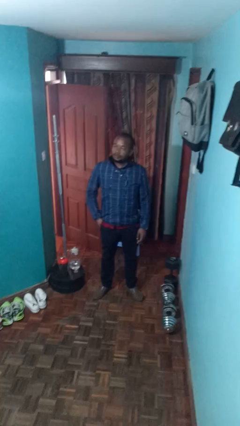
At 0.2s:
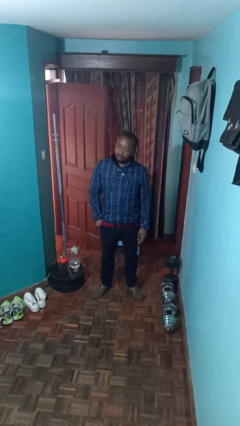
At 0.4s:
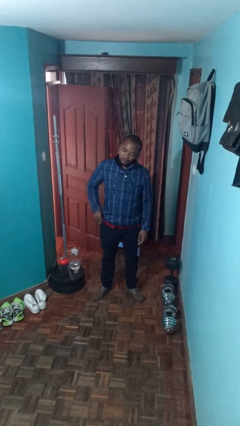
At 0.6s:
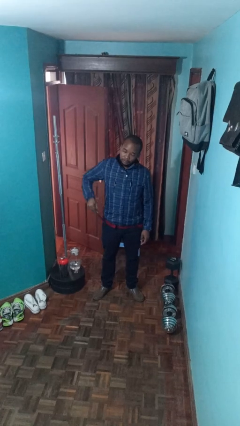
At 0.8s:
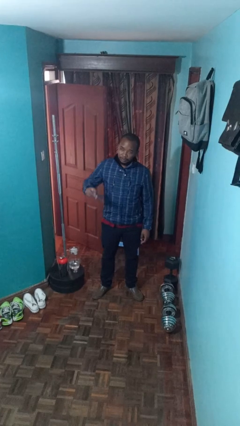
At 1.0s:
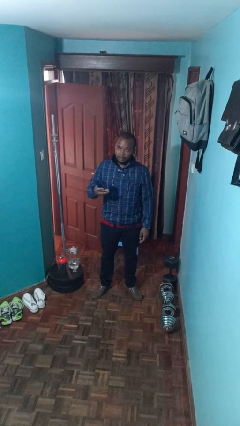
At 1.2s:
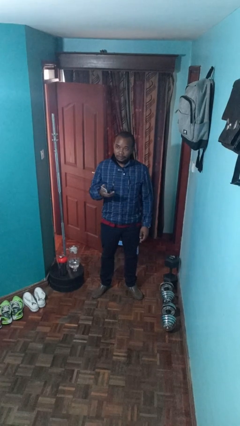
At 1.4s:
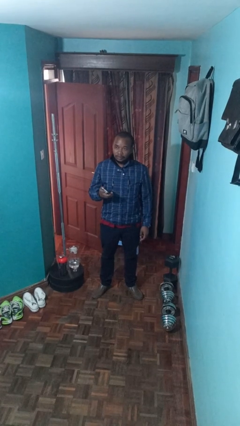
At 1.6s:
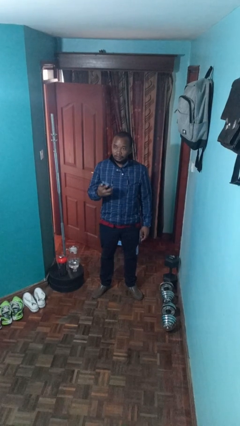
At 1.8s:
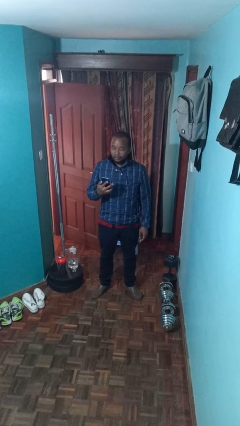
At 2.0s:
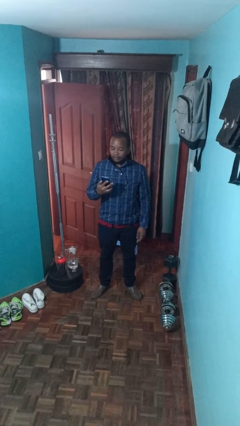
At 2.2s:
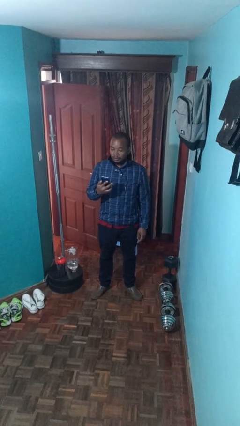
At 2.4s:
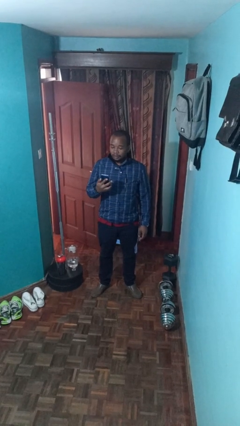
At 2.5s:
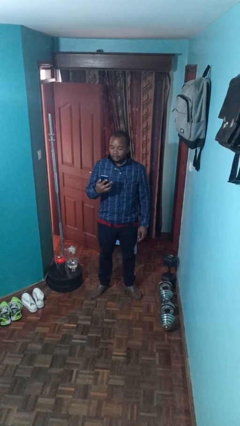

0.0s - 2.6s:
person takes phone from pocket

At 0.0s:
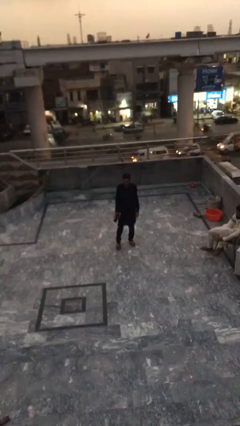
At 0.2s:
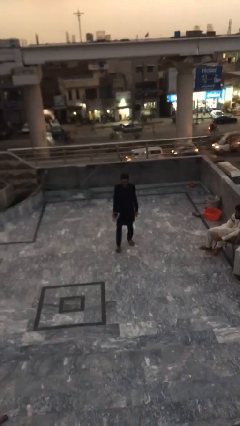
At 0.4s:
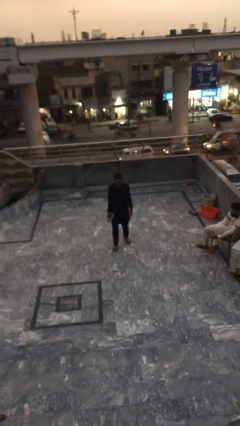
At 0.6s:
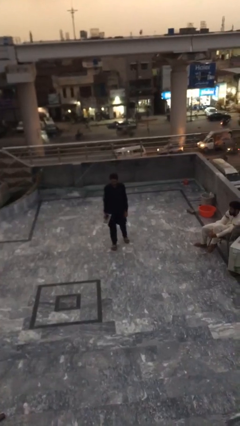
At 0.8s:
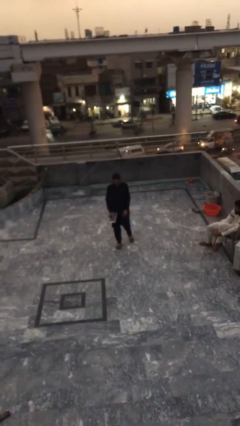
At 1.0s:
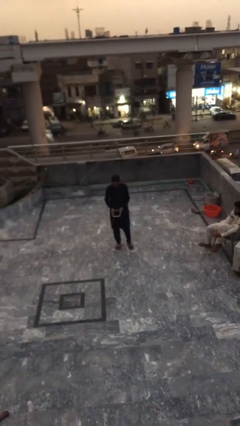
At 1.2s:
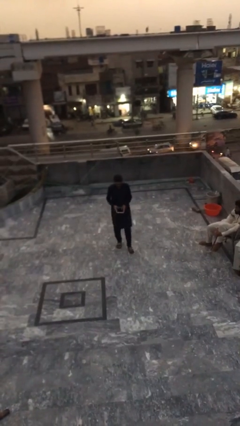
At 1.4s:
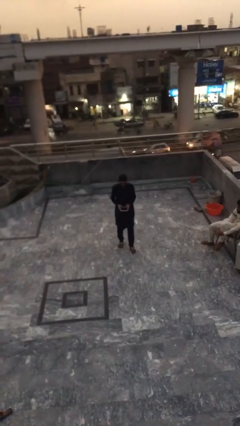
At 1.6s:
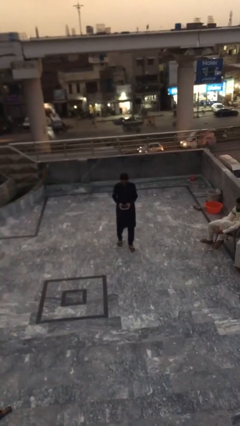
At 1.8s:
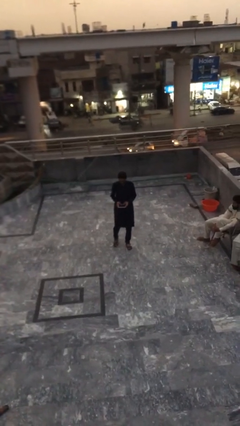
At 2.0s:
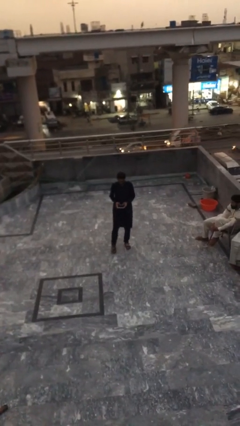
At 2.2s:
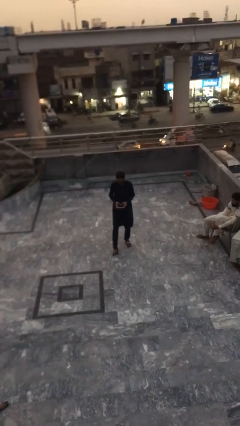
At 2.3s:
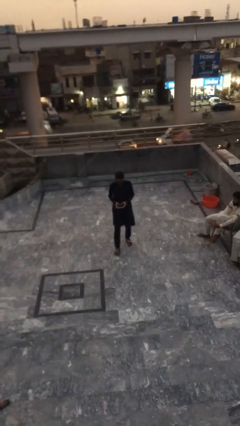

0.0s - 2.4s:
person texts on phone

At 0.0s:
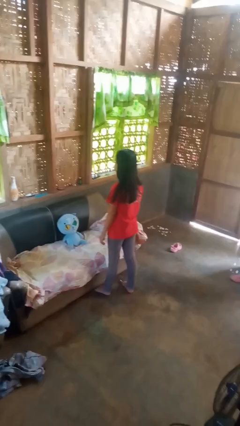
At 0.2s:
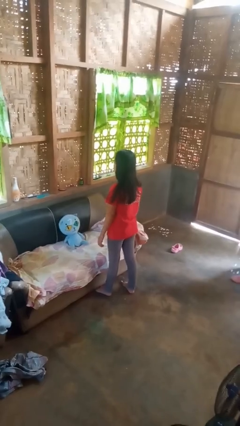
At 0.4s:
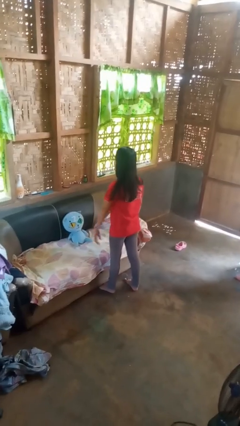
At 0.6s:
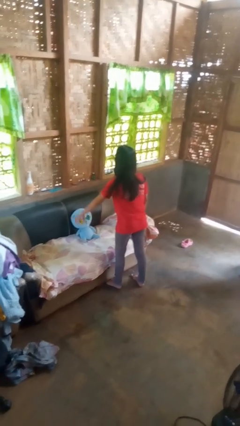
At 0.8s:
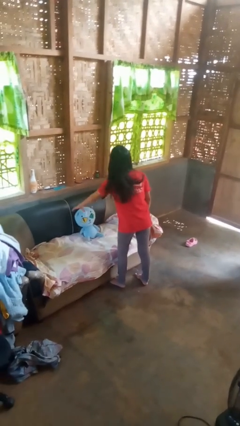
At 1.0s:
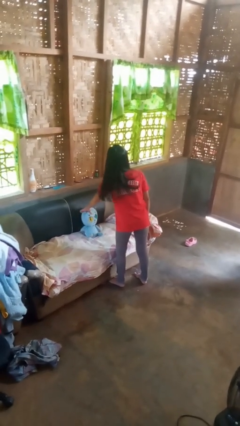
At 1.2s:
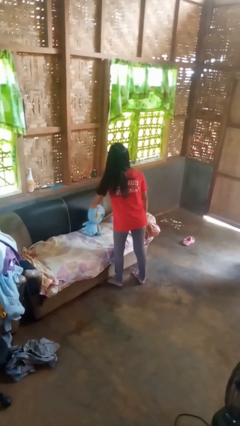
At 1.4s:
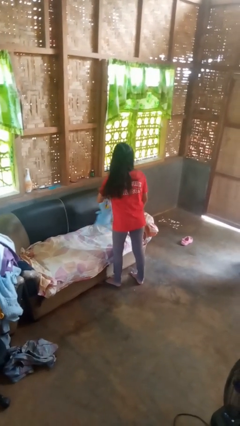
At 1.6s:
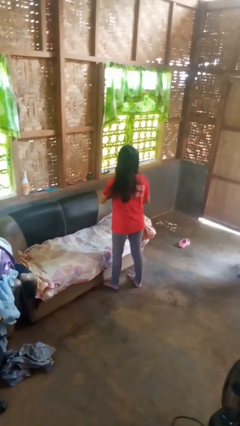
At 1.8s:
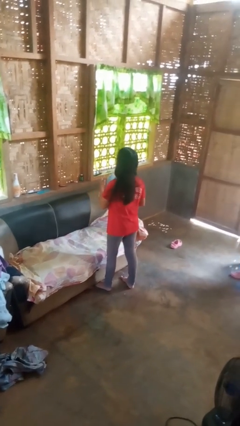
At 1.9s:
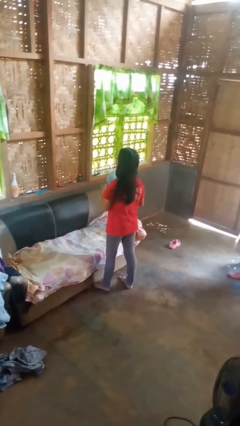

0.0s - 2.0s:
person picks up object from couch

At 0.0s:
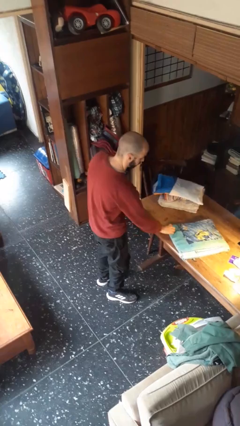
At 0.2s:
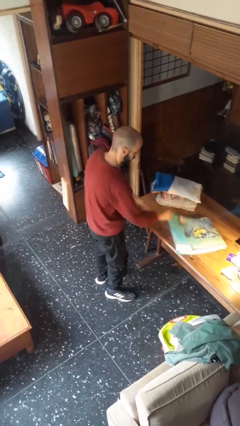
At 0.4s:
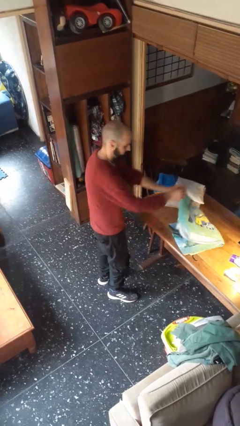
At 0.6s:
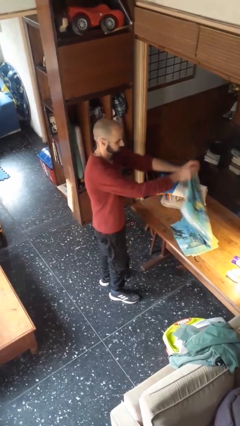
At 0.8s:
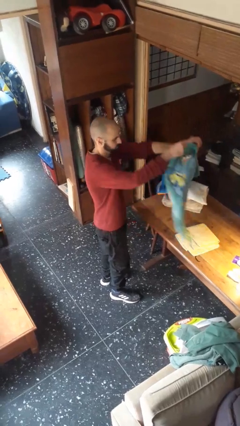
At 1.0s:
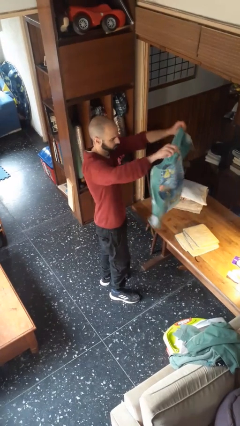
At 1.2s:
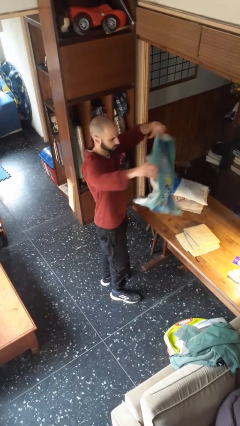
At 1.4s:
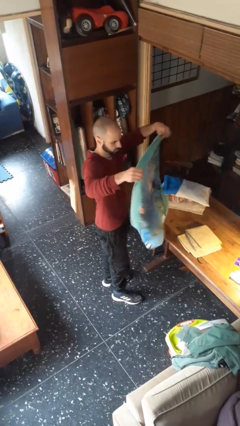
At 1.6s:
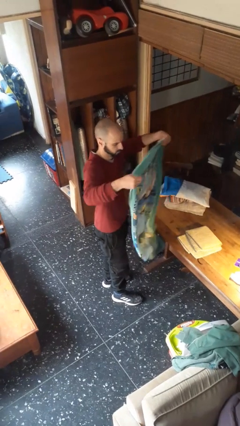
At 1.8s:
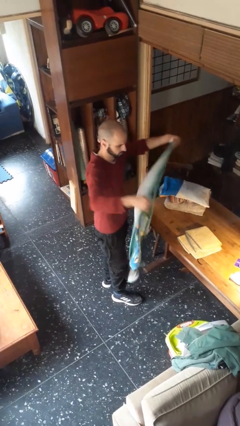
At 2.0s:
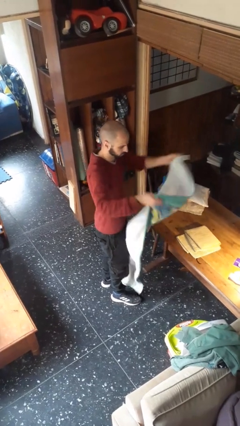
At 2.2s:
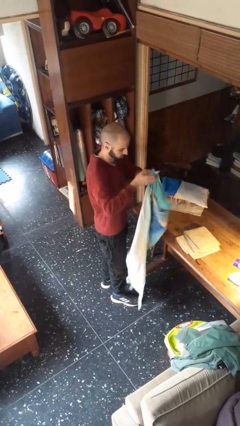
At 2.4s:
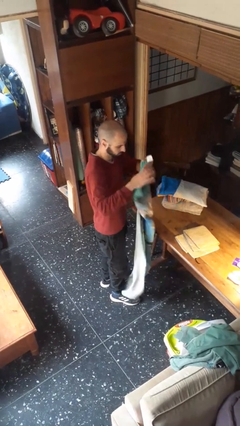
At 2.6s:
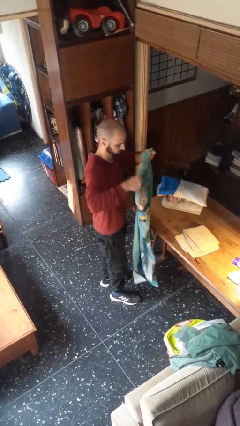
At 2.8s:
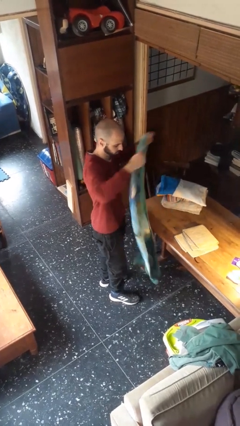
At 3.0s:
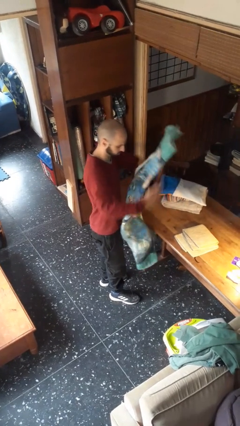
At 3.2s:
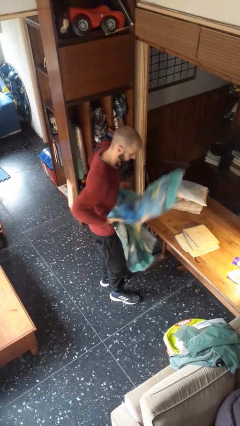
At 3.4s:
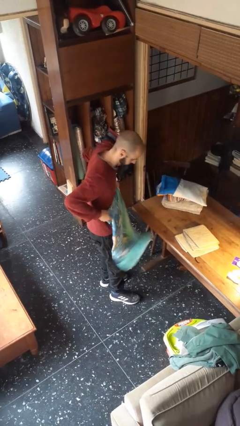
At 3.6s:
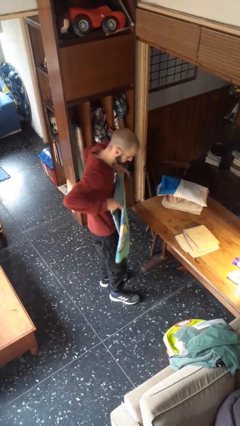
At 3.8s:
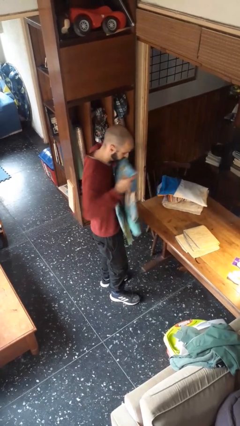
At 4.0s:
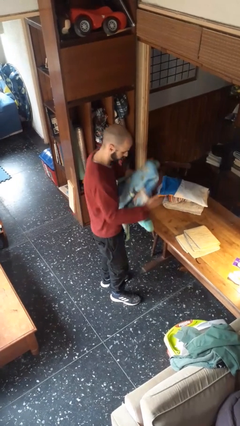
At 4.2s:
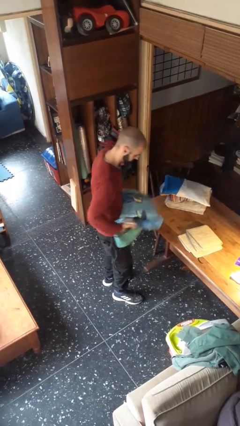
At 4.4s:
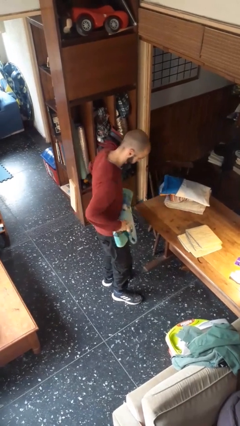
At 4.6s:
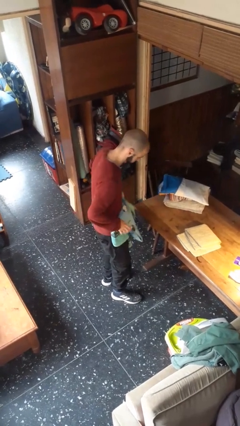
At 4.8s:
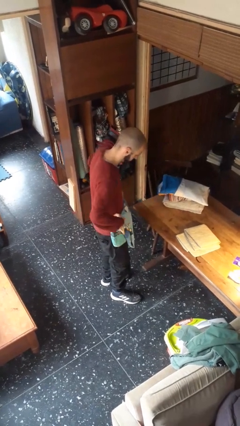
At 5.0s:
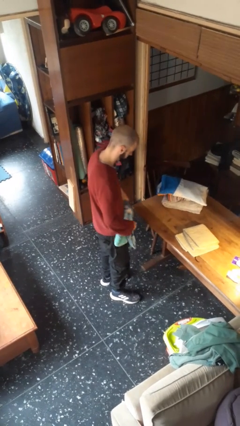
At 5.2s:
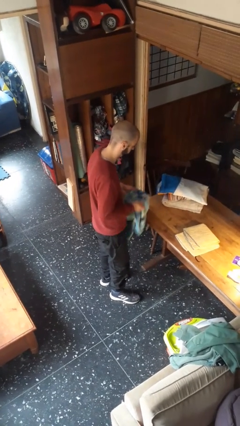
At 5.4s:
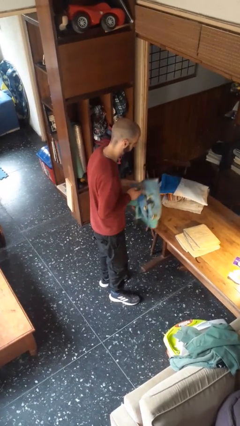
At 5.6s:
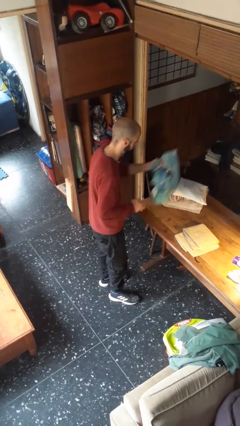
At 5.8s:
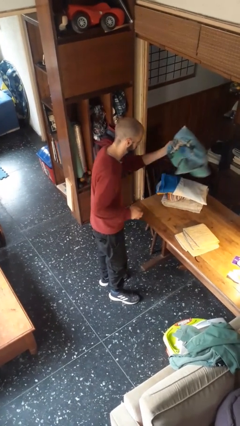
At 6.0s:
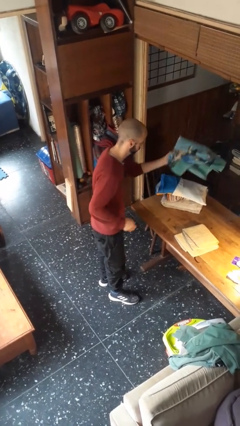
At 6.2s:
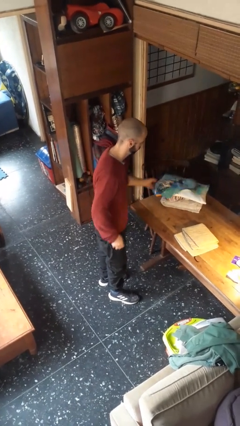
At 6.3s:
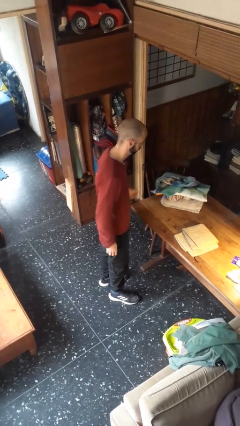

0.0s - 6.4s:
person folds towel

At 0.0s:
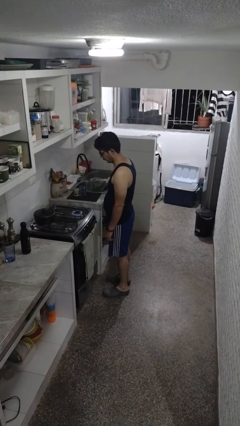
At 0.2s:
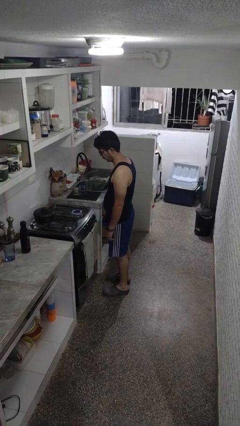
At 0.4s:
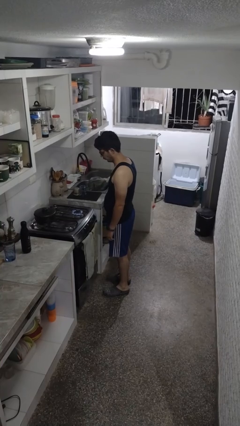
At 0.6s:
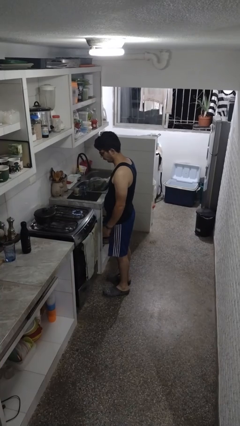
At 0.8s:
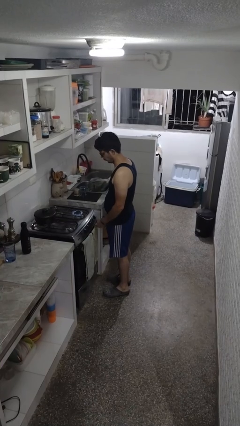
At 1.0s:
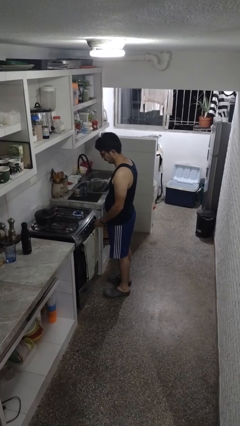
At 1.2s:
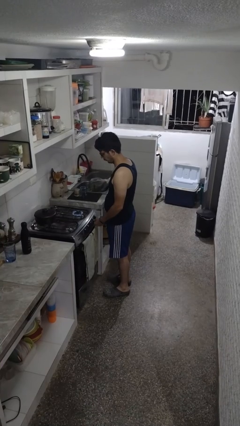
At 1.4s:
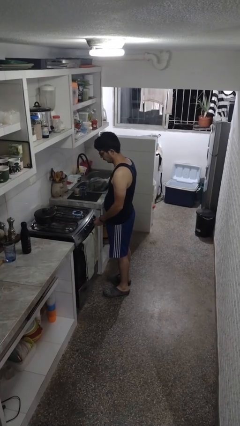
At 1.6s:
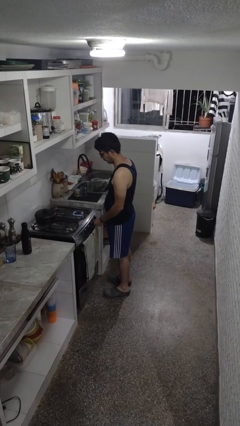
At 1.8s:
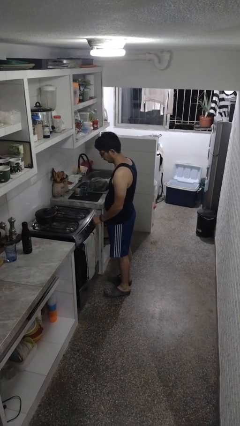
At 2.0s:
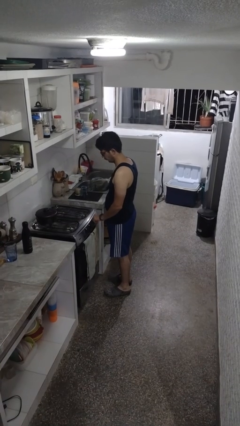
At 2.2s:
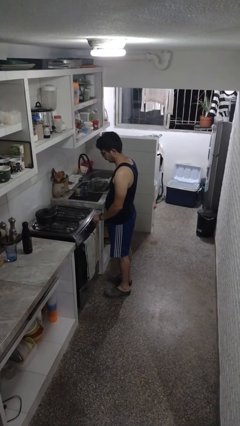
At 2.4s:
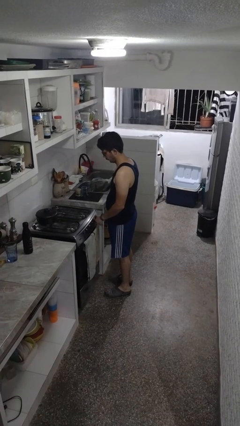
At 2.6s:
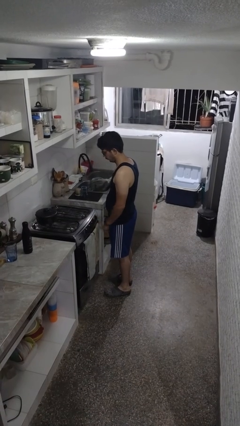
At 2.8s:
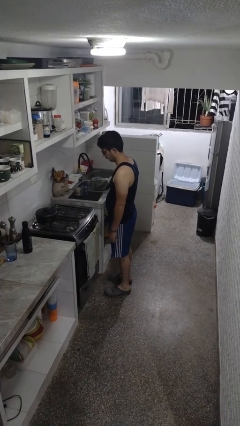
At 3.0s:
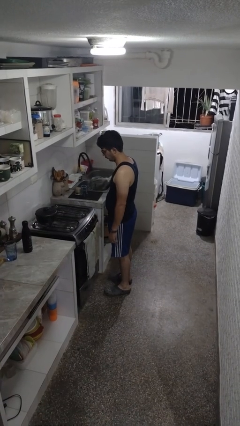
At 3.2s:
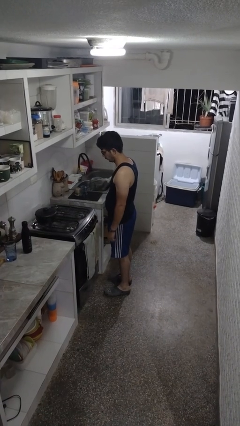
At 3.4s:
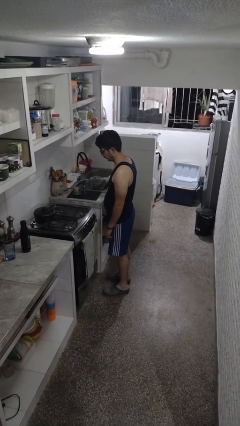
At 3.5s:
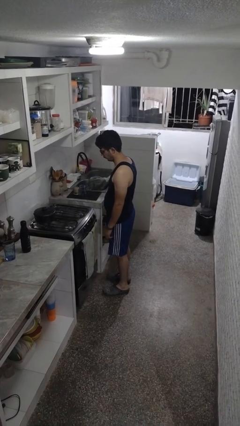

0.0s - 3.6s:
person turns off stovetop

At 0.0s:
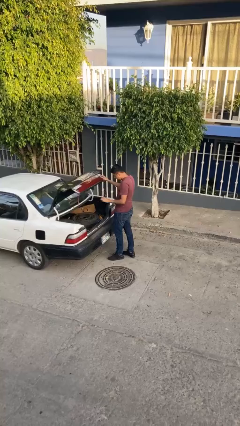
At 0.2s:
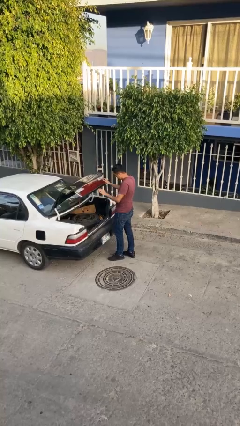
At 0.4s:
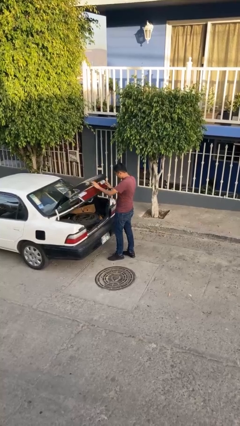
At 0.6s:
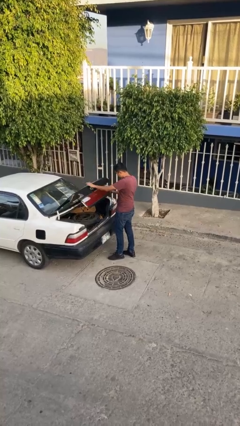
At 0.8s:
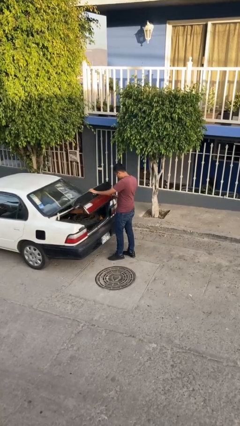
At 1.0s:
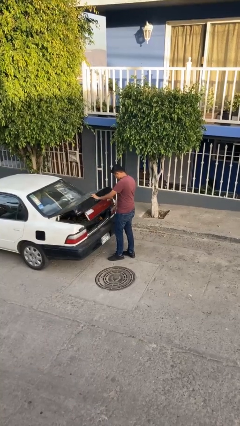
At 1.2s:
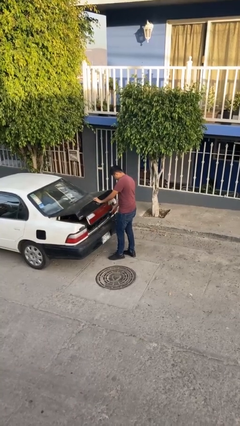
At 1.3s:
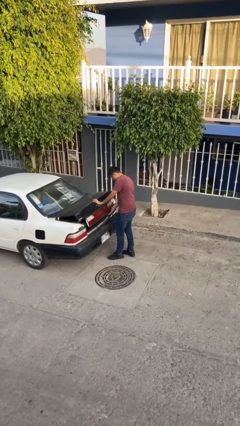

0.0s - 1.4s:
person closes car trunk
